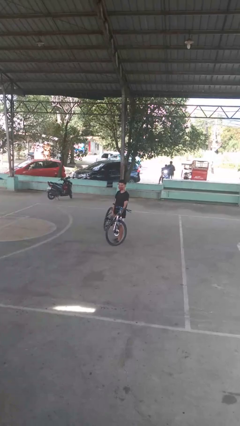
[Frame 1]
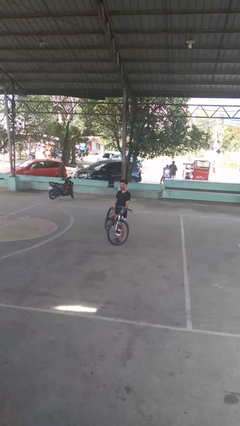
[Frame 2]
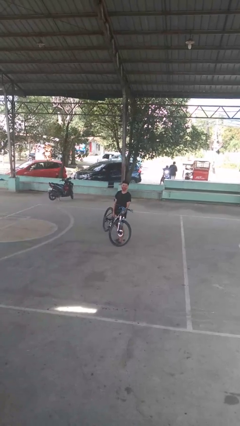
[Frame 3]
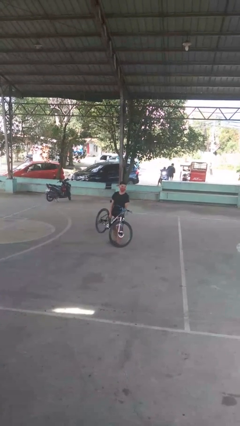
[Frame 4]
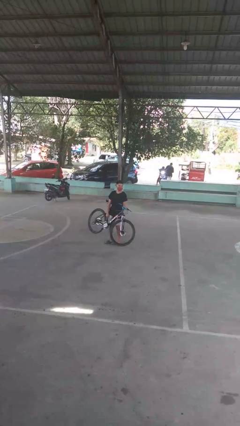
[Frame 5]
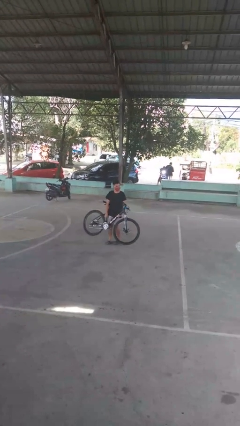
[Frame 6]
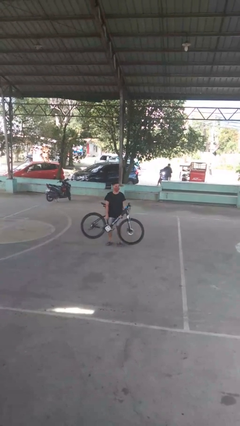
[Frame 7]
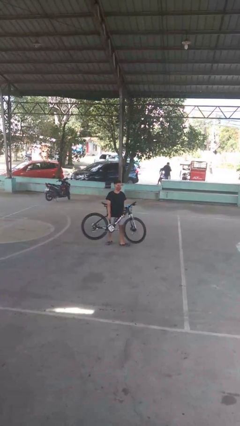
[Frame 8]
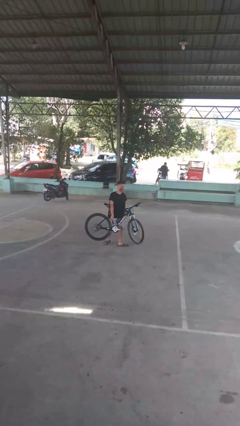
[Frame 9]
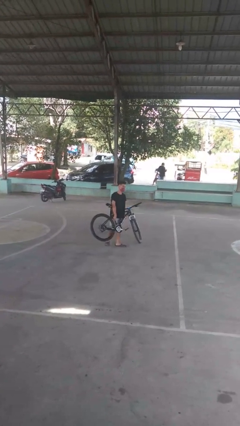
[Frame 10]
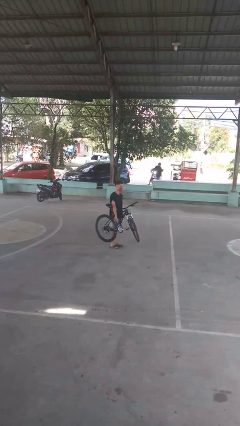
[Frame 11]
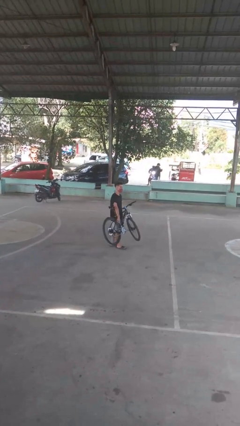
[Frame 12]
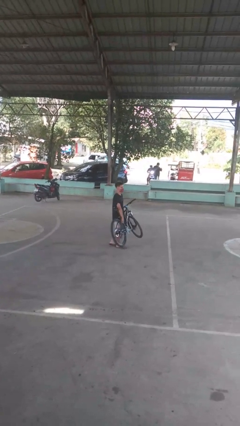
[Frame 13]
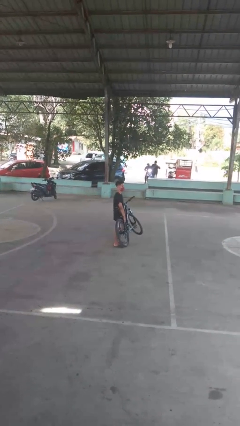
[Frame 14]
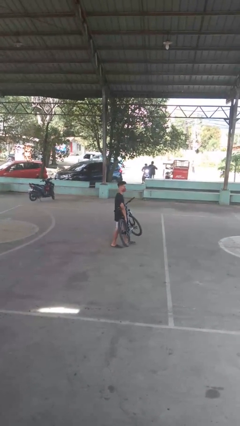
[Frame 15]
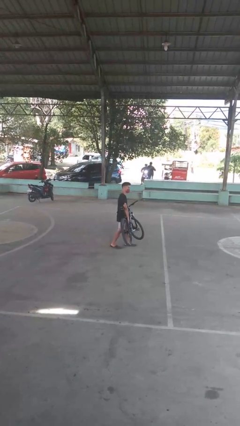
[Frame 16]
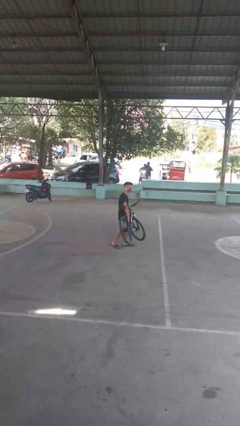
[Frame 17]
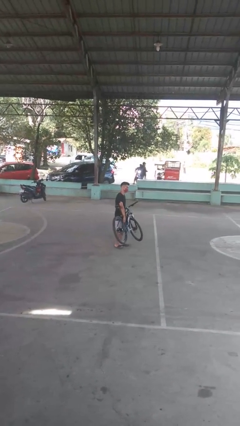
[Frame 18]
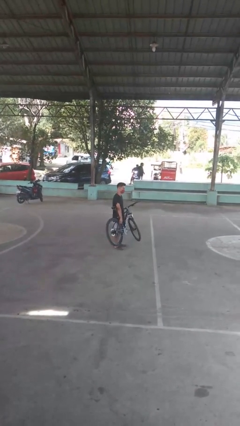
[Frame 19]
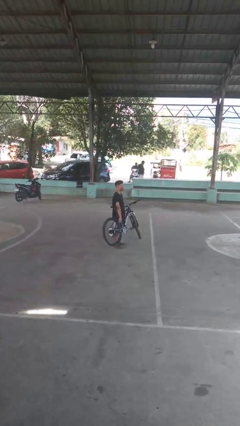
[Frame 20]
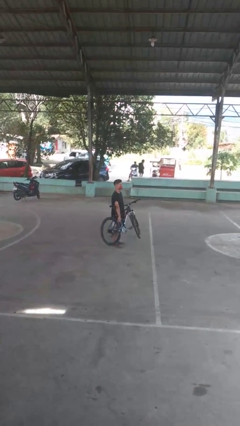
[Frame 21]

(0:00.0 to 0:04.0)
person carries bicycle

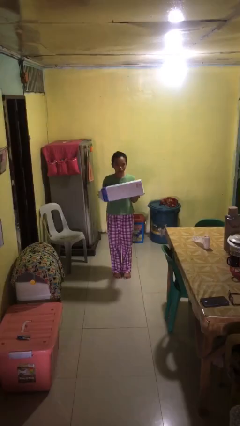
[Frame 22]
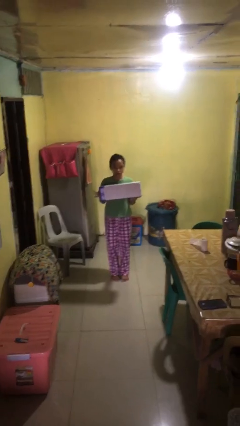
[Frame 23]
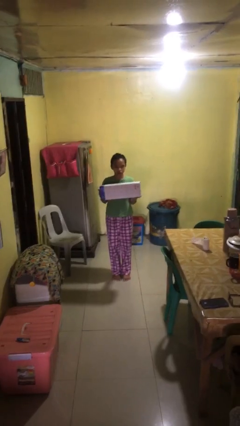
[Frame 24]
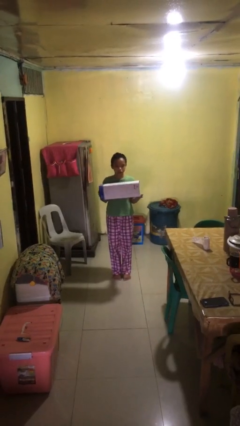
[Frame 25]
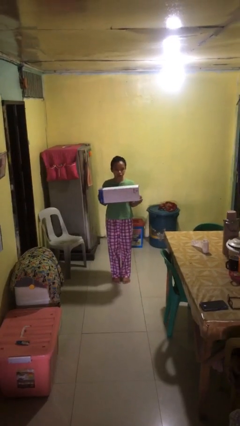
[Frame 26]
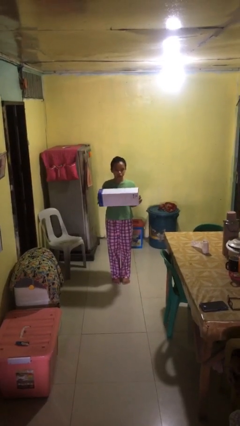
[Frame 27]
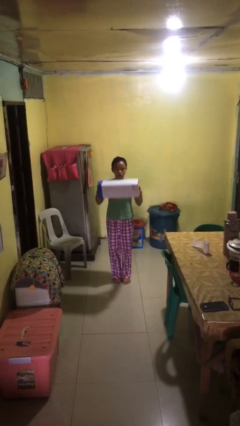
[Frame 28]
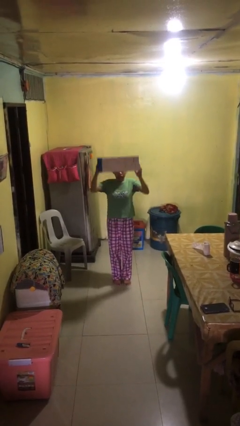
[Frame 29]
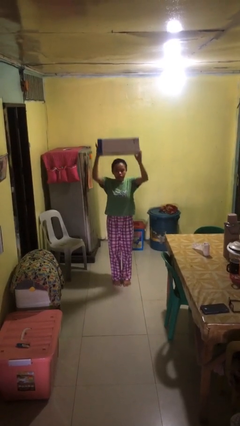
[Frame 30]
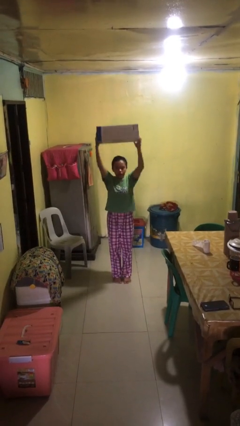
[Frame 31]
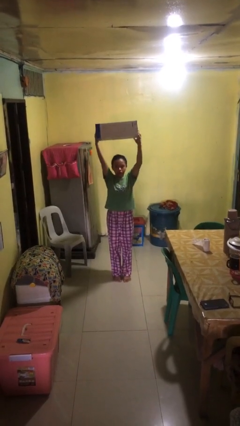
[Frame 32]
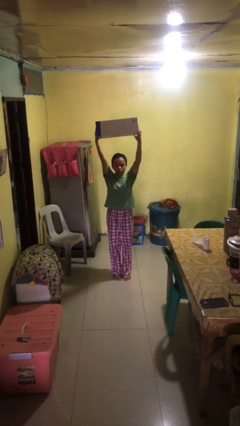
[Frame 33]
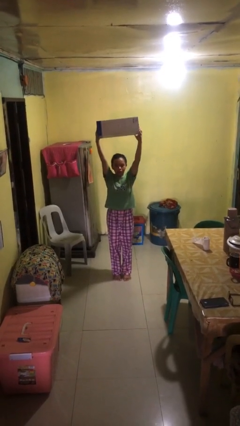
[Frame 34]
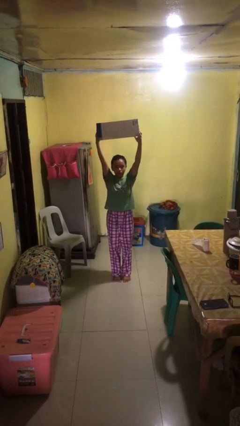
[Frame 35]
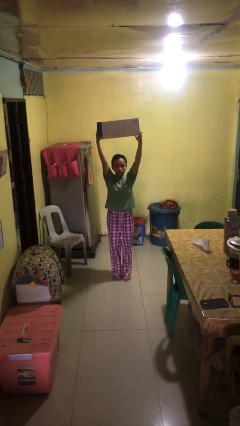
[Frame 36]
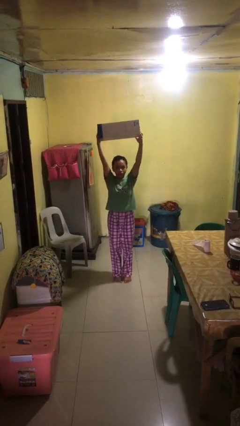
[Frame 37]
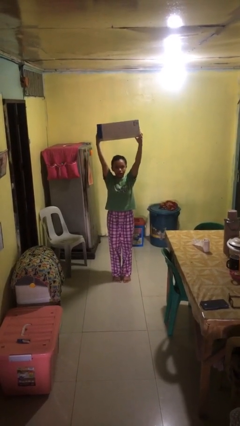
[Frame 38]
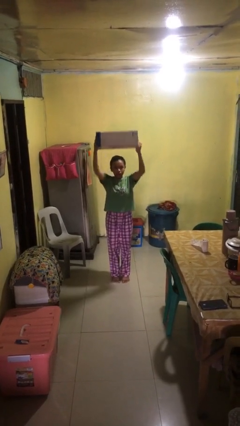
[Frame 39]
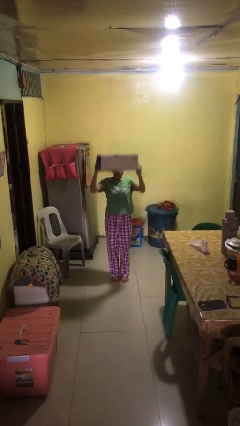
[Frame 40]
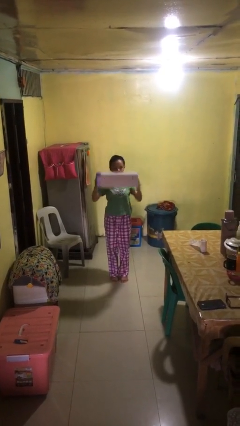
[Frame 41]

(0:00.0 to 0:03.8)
person holds object above head

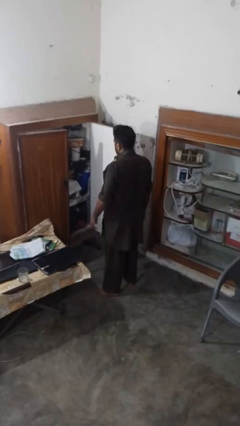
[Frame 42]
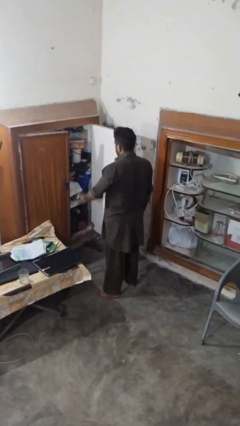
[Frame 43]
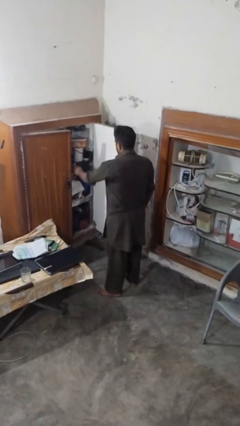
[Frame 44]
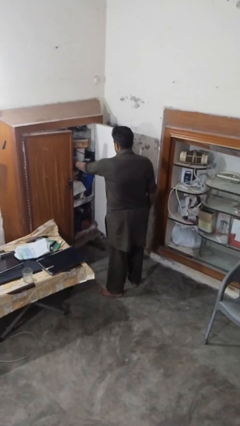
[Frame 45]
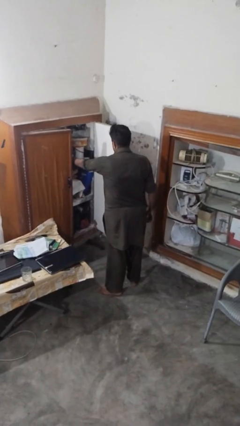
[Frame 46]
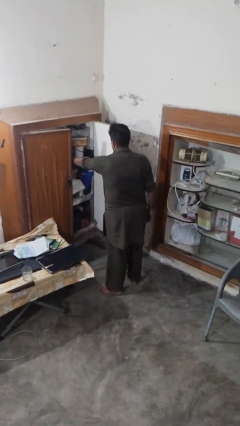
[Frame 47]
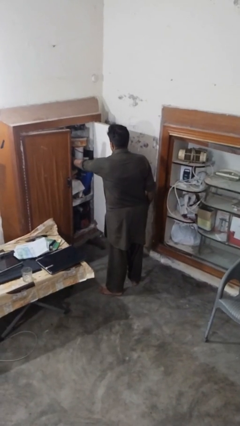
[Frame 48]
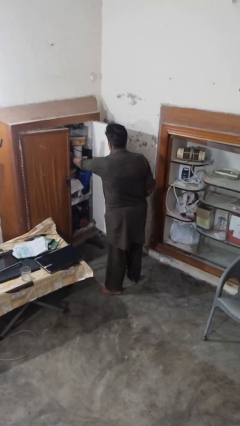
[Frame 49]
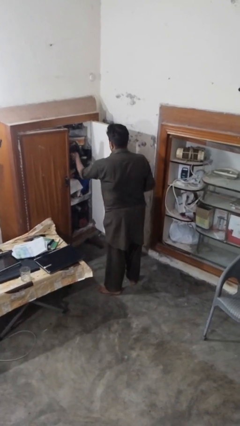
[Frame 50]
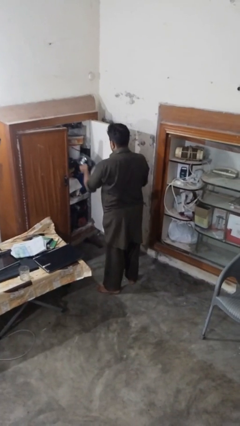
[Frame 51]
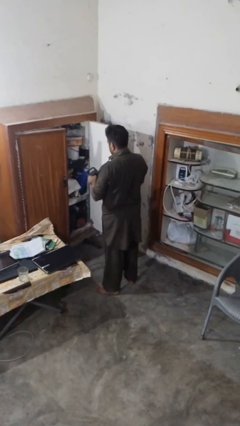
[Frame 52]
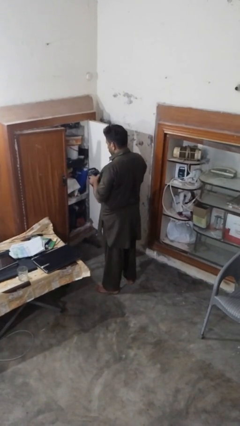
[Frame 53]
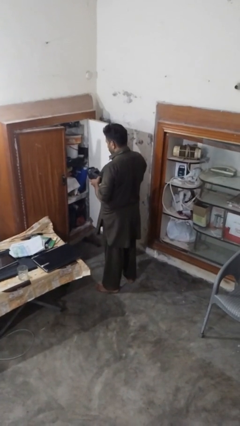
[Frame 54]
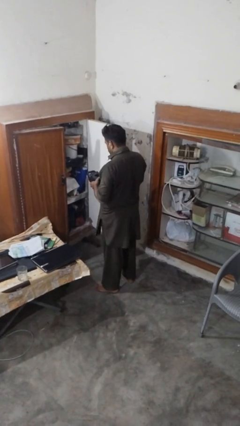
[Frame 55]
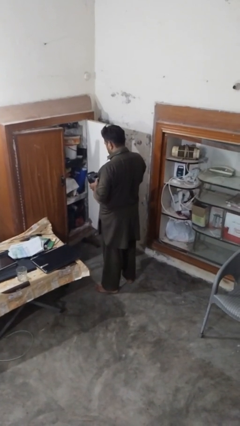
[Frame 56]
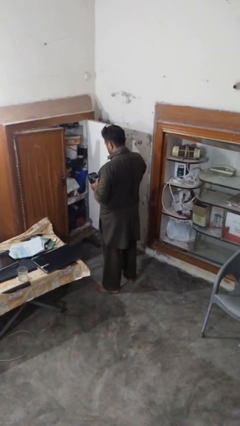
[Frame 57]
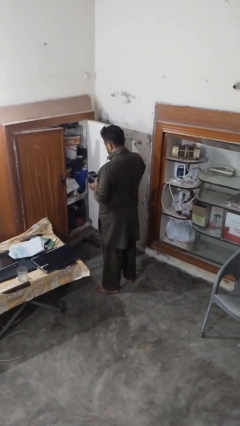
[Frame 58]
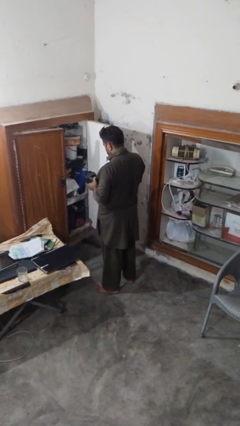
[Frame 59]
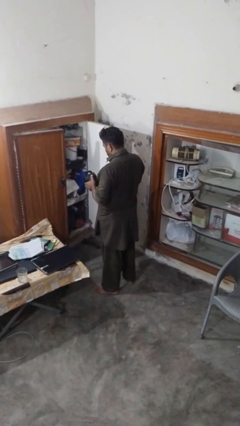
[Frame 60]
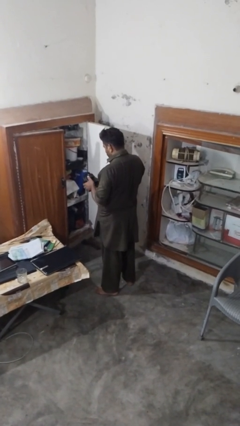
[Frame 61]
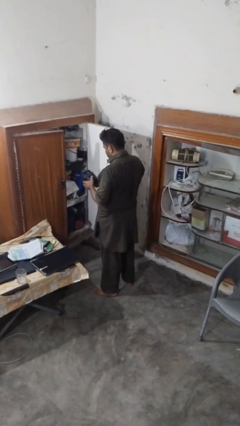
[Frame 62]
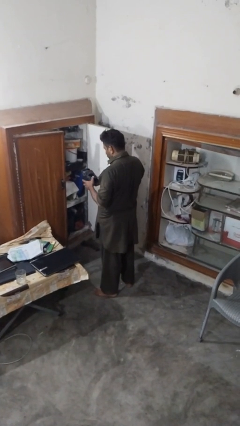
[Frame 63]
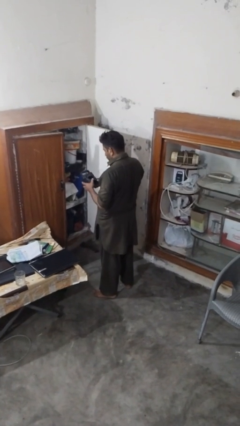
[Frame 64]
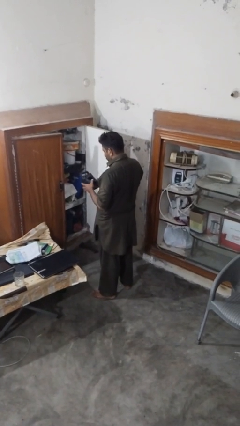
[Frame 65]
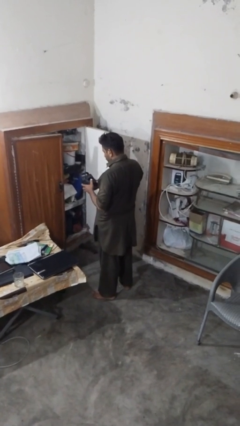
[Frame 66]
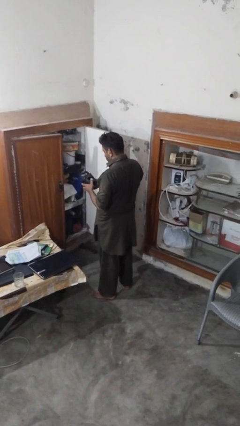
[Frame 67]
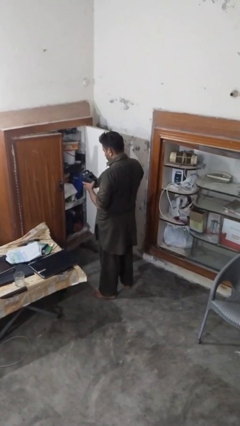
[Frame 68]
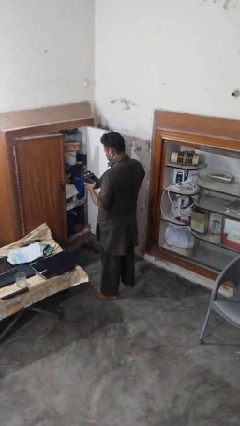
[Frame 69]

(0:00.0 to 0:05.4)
person picks up object from cabinet

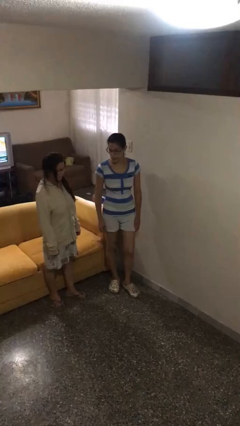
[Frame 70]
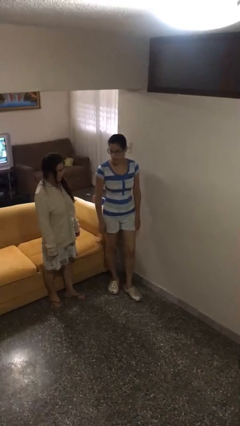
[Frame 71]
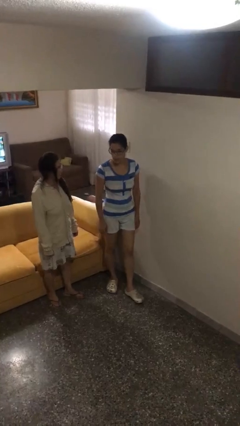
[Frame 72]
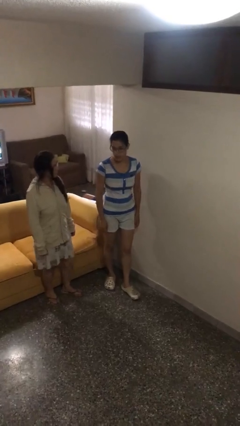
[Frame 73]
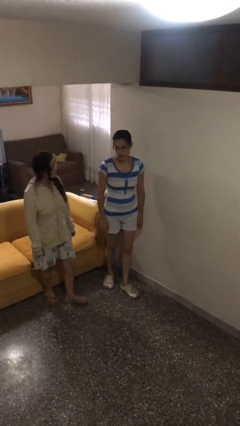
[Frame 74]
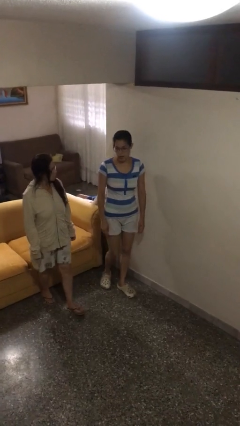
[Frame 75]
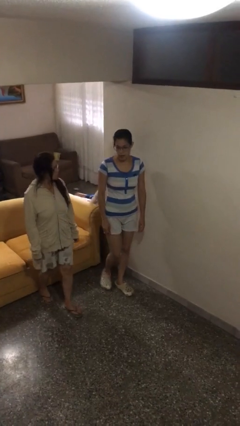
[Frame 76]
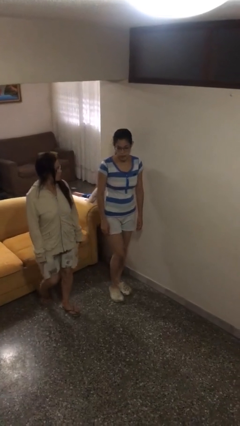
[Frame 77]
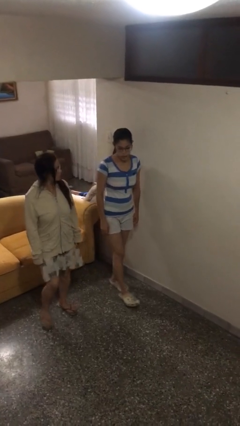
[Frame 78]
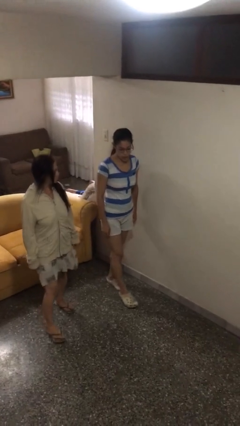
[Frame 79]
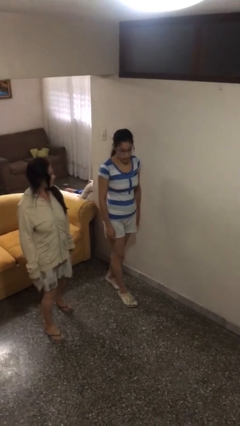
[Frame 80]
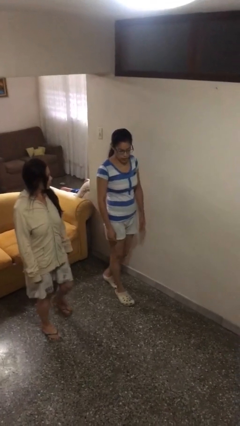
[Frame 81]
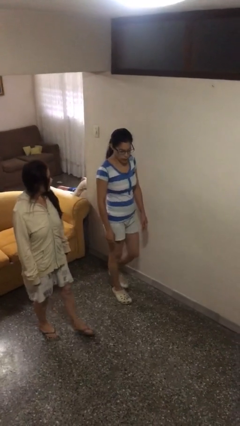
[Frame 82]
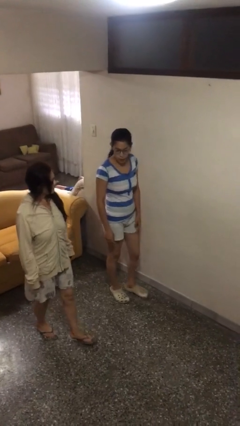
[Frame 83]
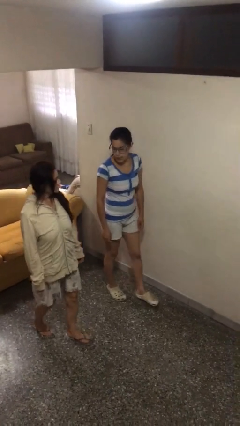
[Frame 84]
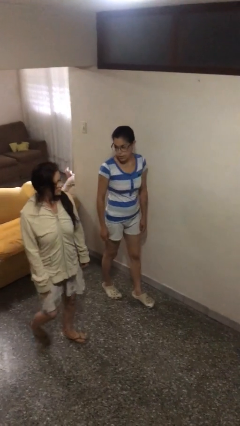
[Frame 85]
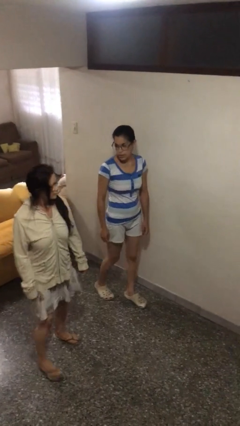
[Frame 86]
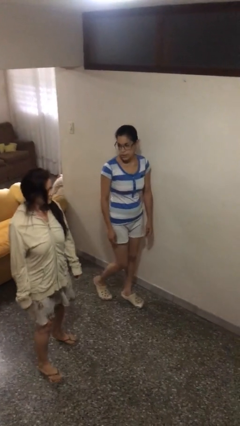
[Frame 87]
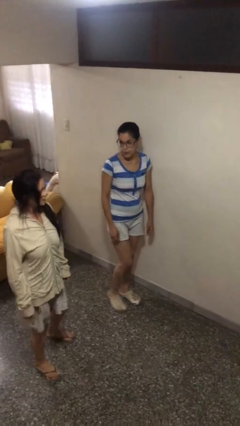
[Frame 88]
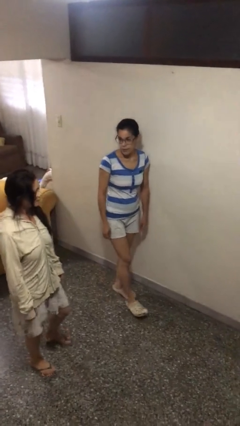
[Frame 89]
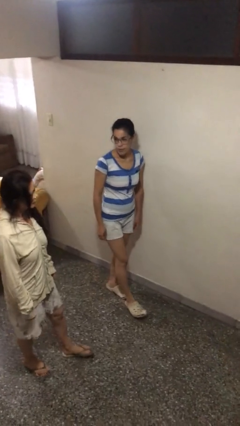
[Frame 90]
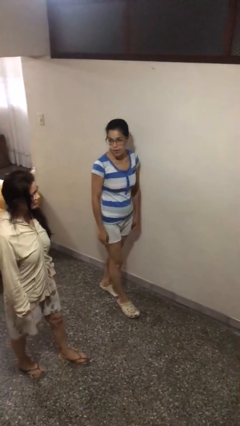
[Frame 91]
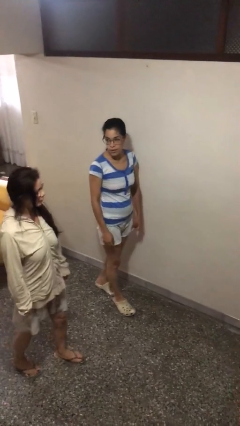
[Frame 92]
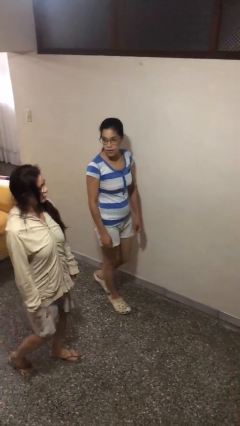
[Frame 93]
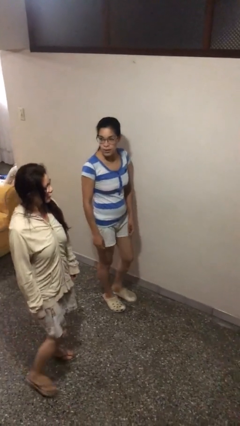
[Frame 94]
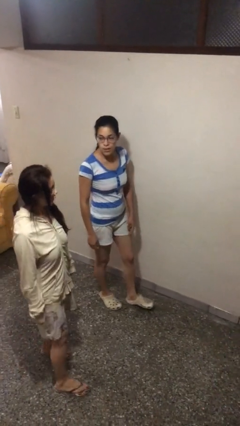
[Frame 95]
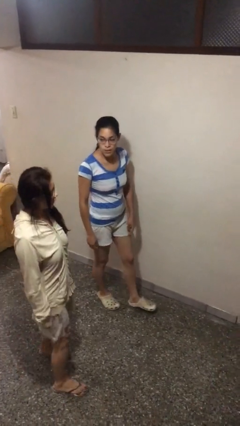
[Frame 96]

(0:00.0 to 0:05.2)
person talks to person
